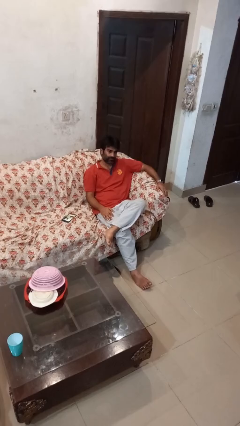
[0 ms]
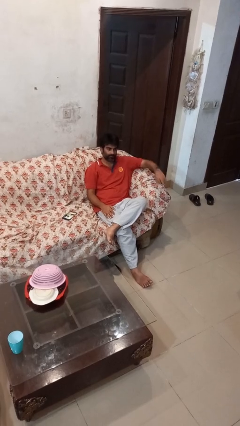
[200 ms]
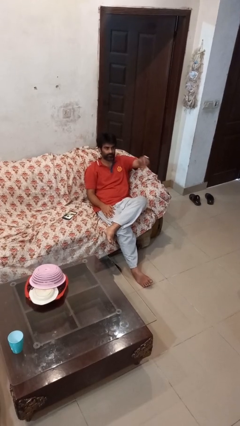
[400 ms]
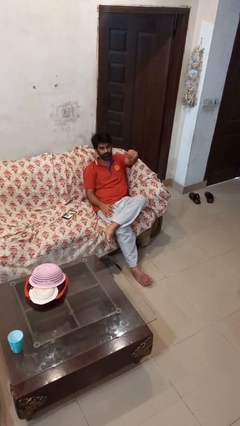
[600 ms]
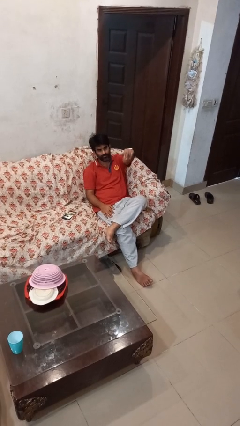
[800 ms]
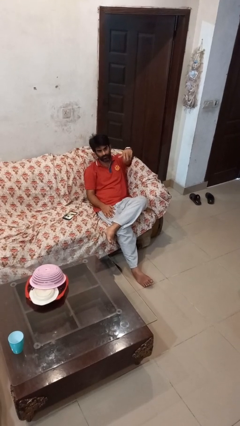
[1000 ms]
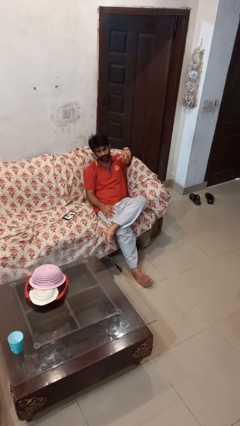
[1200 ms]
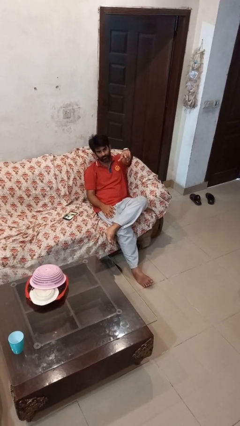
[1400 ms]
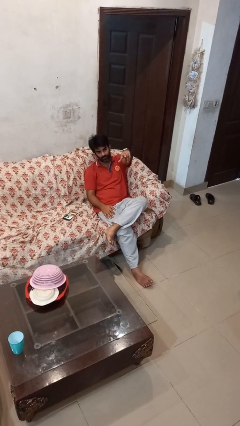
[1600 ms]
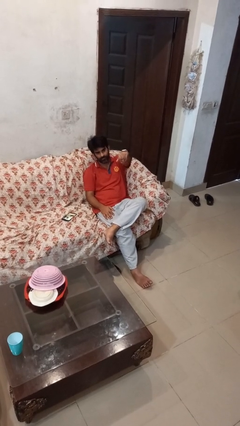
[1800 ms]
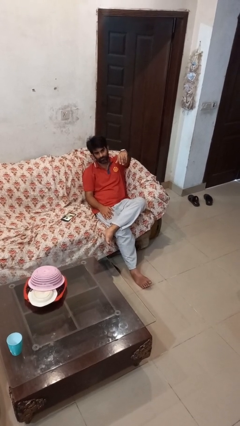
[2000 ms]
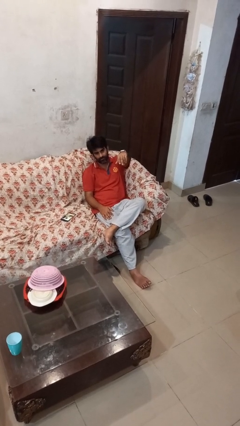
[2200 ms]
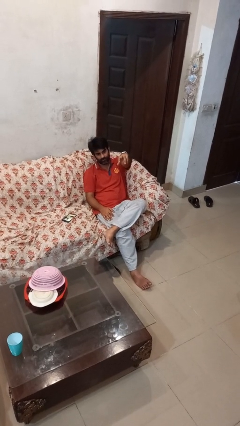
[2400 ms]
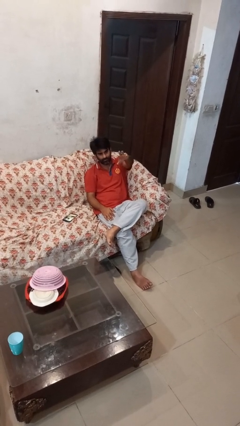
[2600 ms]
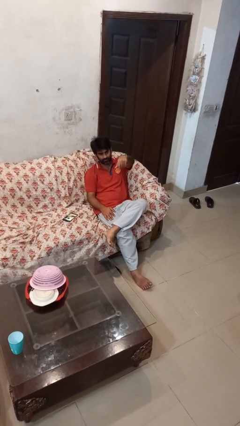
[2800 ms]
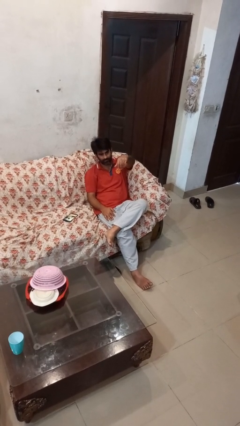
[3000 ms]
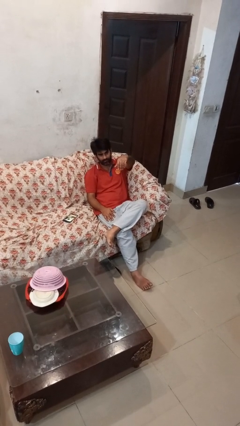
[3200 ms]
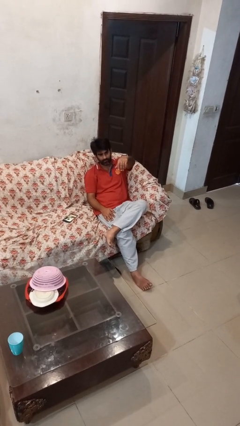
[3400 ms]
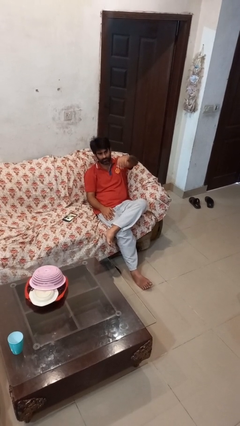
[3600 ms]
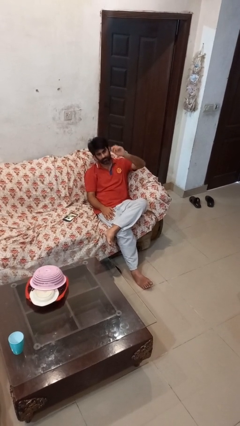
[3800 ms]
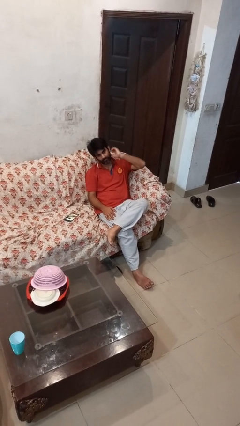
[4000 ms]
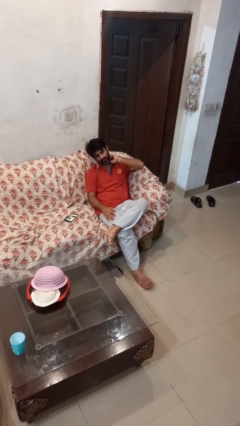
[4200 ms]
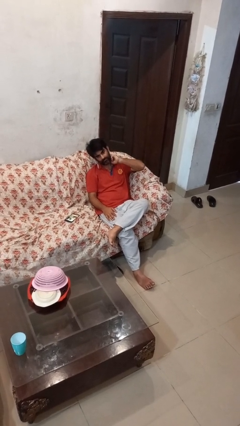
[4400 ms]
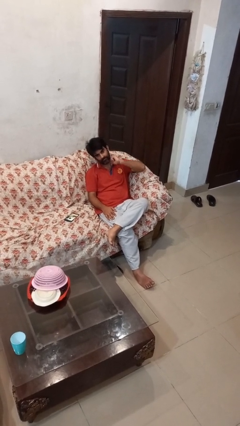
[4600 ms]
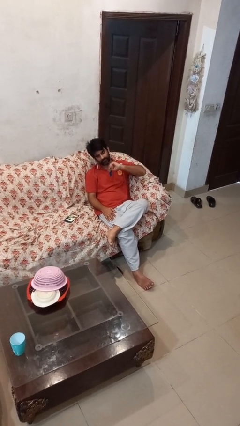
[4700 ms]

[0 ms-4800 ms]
person gestures come here

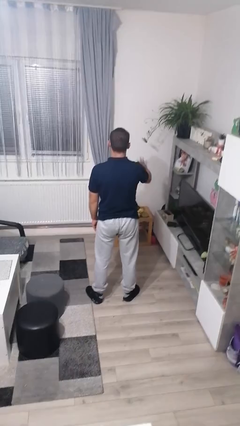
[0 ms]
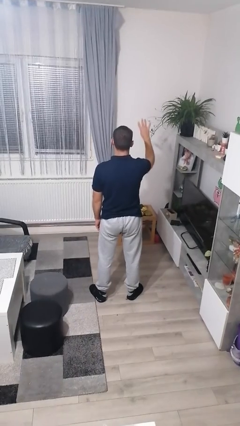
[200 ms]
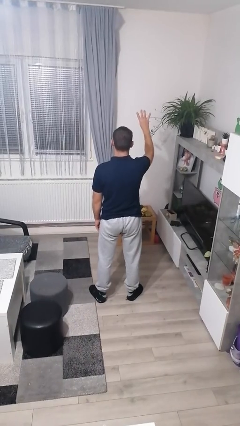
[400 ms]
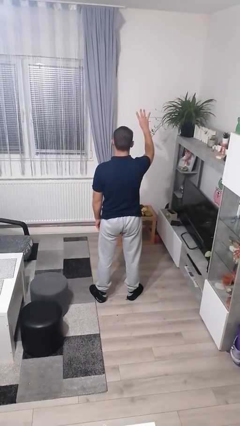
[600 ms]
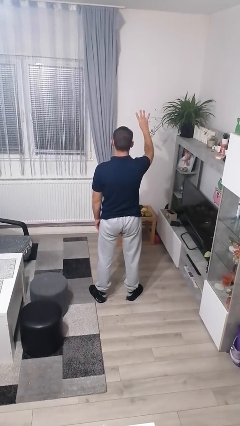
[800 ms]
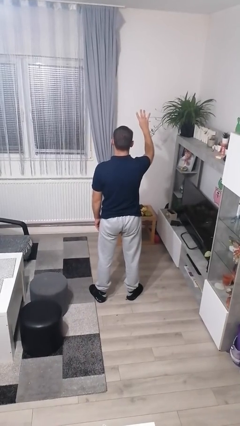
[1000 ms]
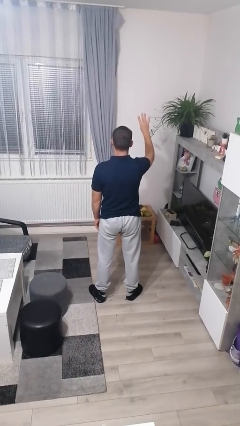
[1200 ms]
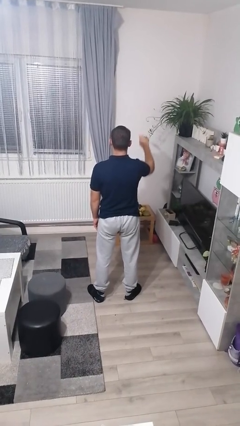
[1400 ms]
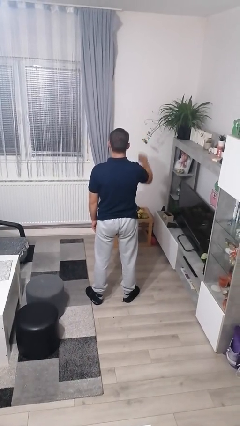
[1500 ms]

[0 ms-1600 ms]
person gestures number four

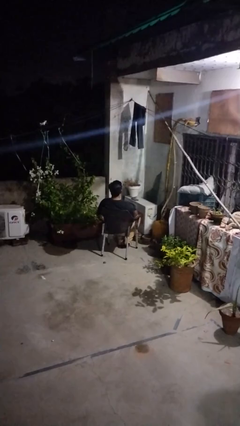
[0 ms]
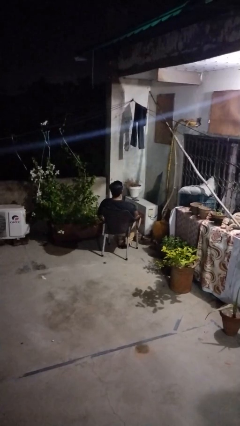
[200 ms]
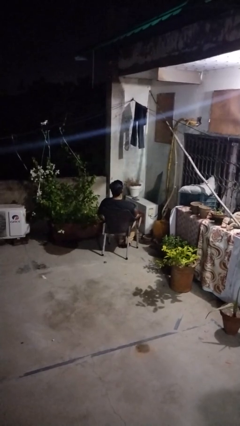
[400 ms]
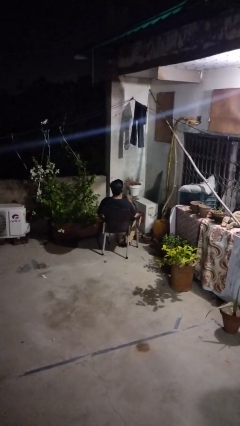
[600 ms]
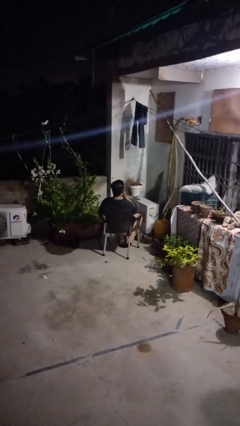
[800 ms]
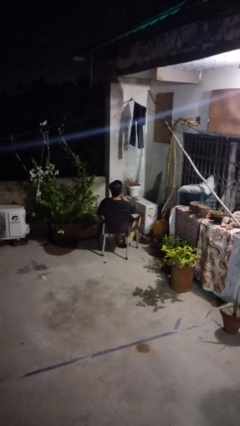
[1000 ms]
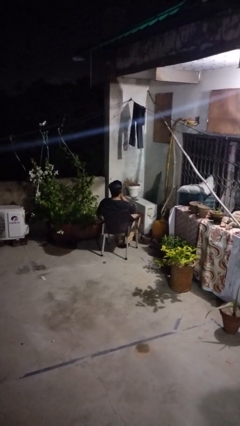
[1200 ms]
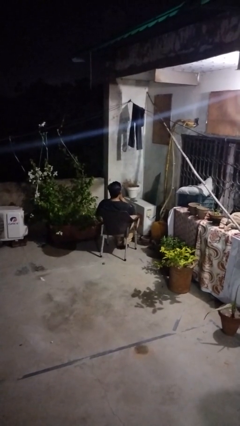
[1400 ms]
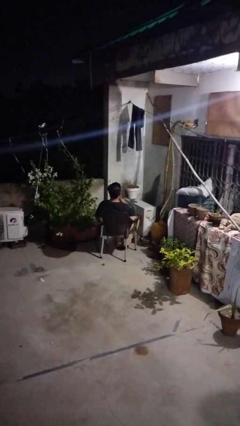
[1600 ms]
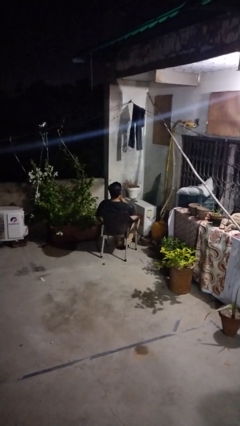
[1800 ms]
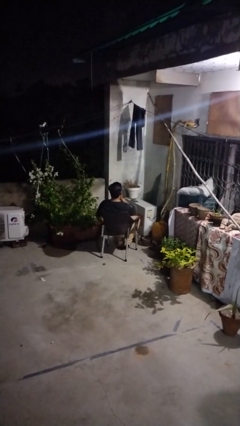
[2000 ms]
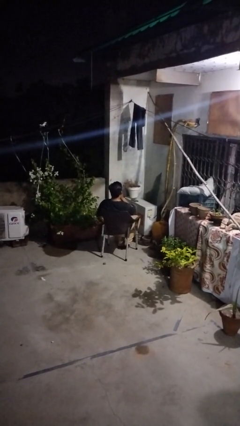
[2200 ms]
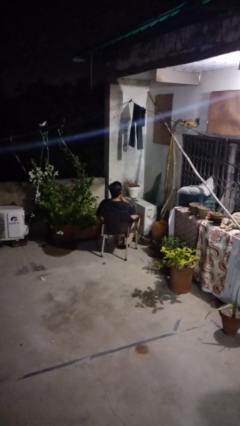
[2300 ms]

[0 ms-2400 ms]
person gestures be quiet

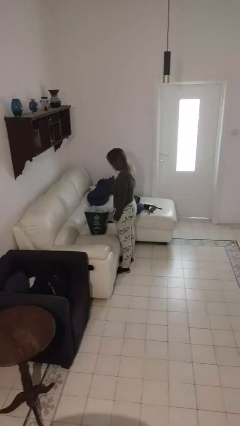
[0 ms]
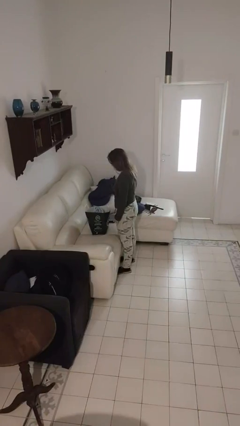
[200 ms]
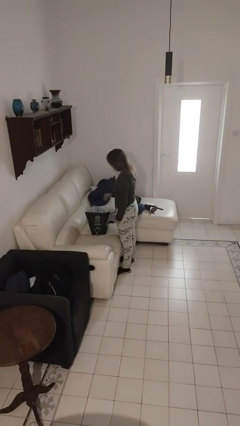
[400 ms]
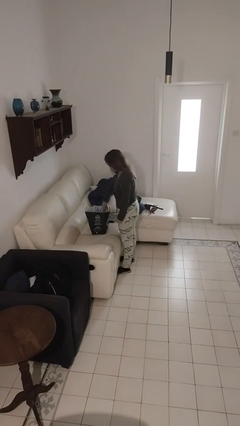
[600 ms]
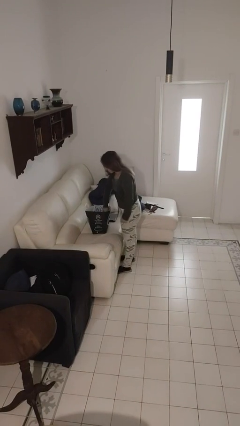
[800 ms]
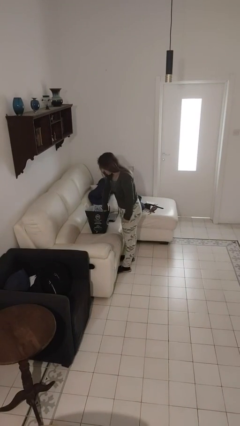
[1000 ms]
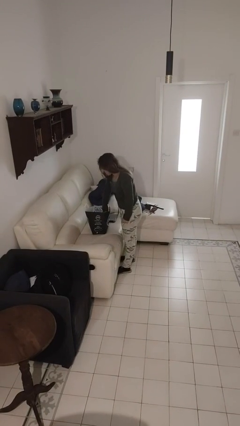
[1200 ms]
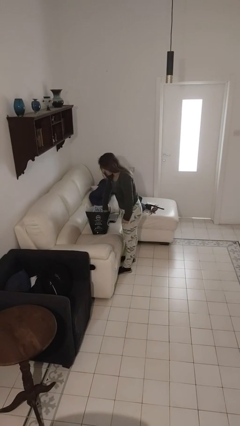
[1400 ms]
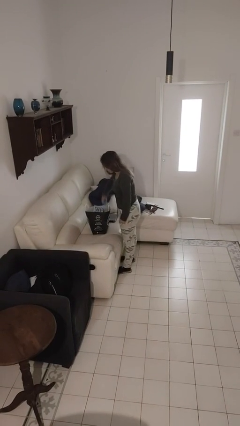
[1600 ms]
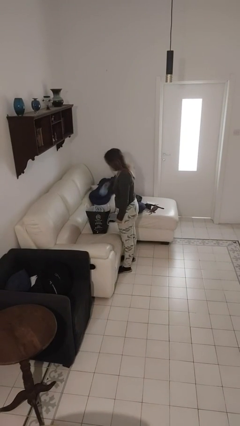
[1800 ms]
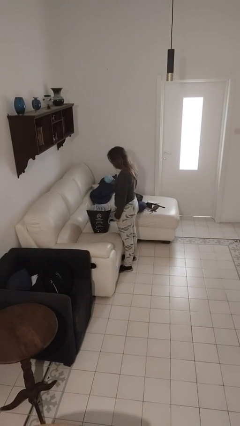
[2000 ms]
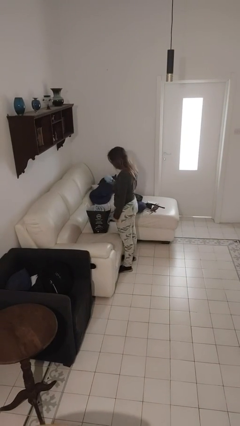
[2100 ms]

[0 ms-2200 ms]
person takes object from bag

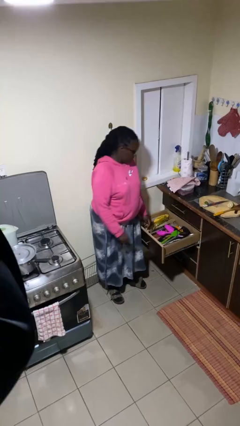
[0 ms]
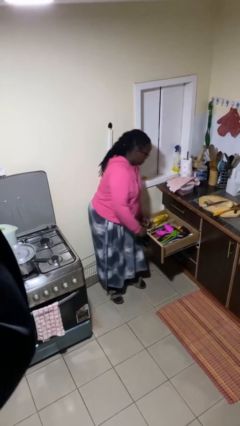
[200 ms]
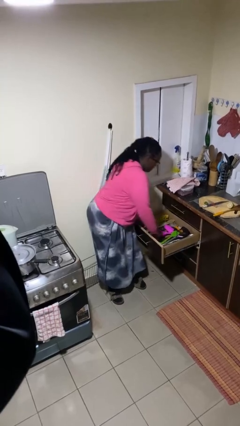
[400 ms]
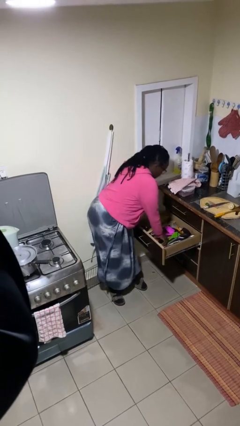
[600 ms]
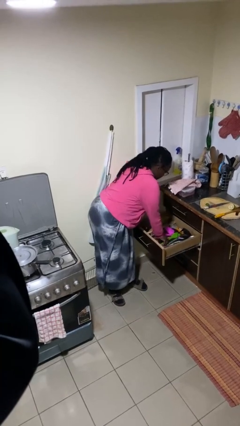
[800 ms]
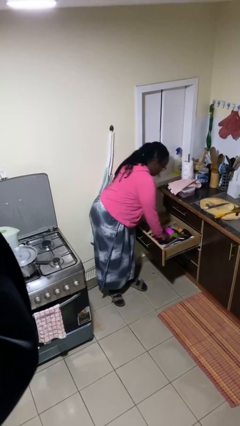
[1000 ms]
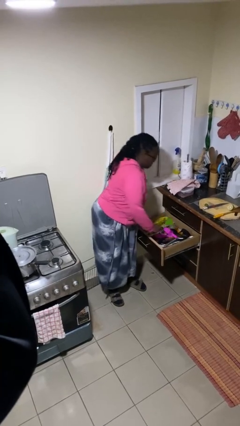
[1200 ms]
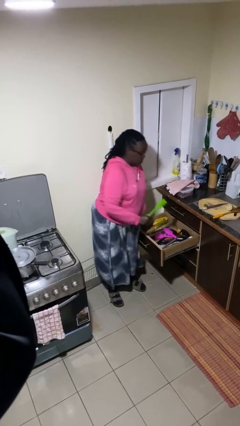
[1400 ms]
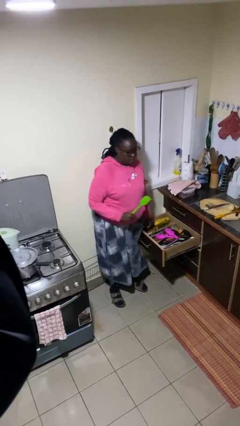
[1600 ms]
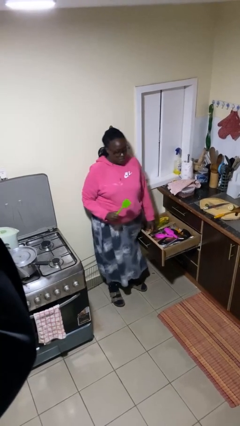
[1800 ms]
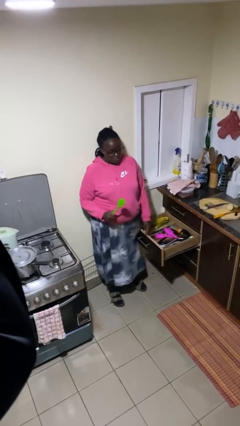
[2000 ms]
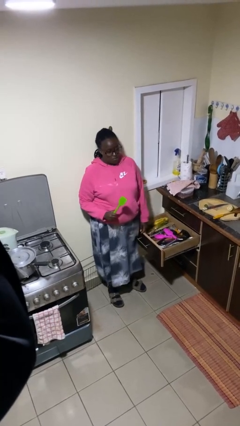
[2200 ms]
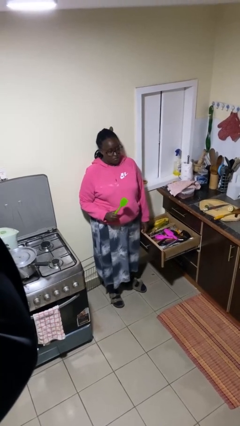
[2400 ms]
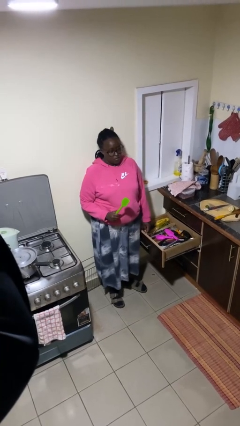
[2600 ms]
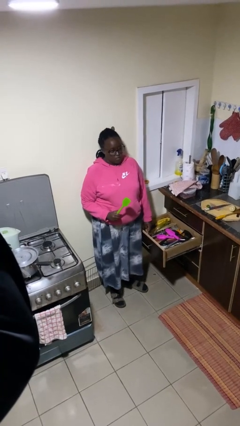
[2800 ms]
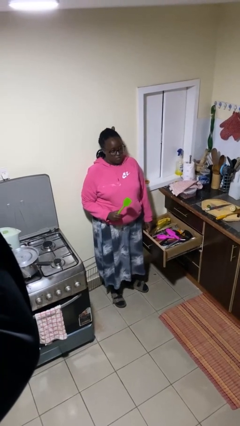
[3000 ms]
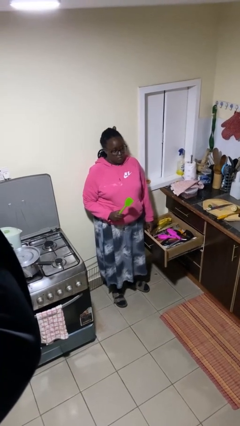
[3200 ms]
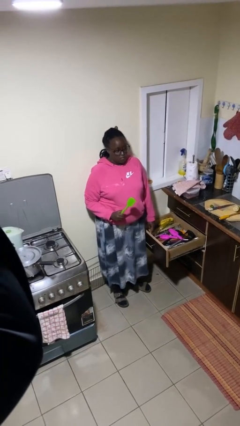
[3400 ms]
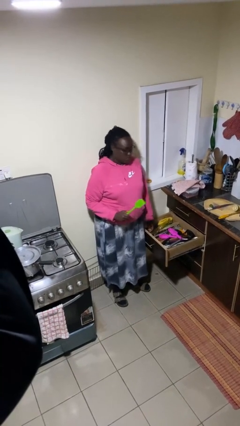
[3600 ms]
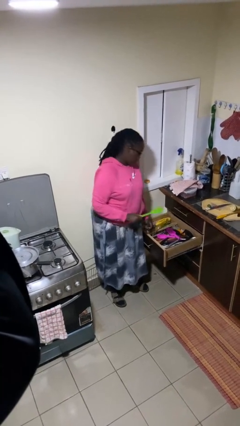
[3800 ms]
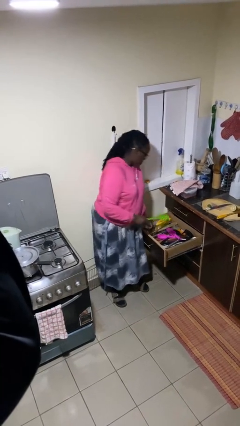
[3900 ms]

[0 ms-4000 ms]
person takes object from kitchen drawer

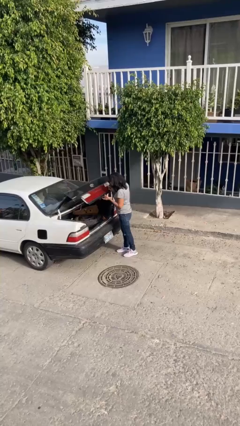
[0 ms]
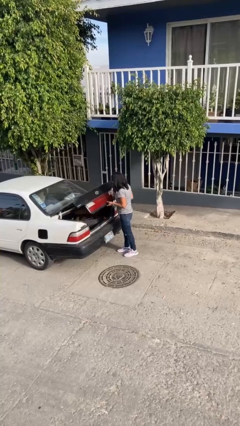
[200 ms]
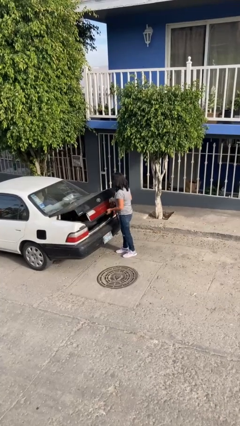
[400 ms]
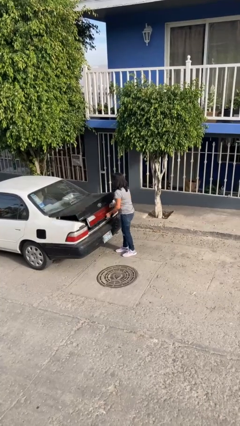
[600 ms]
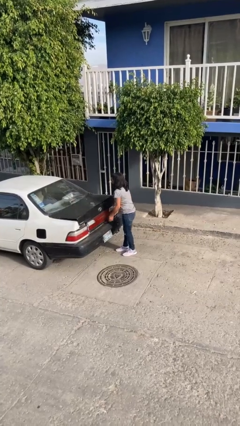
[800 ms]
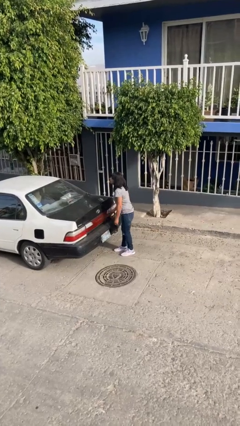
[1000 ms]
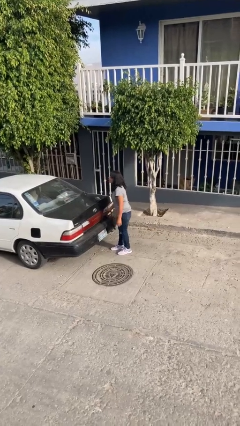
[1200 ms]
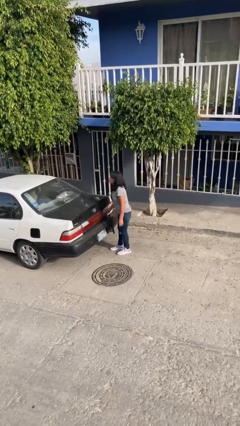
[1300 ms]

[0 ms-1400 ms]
person closes car trunk

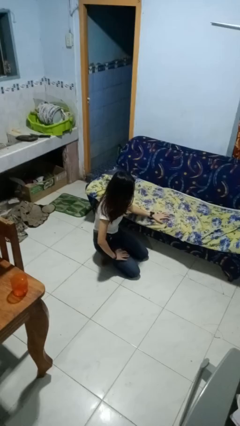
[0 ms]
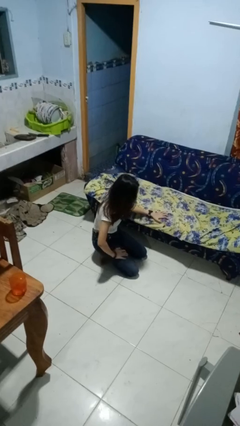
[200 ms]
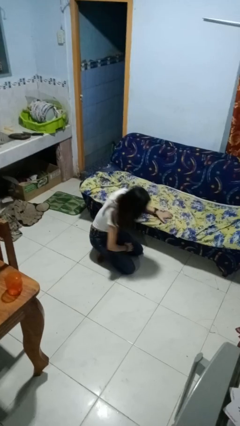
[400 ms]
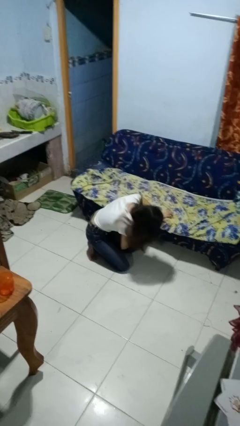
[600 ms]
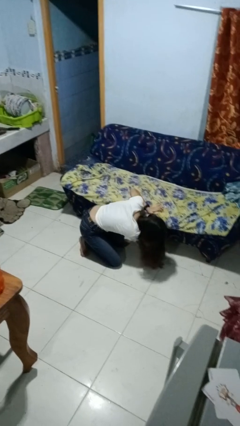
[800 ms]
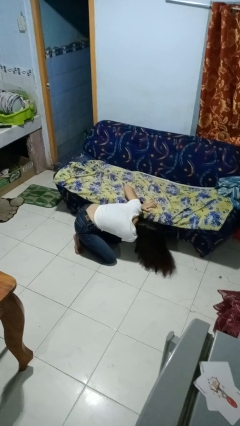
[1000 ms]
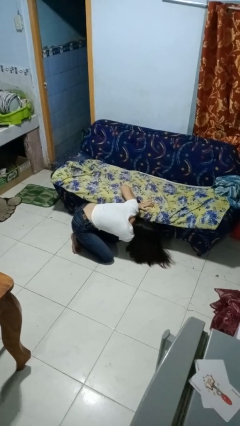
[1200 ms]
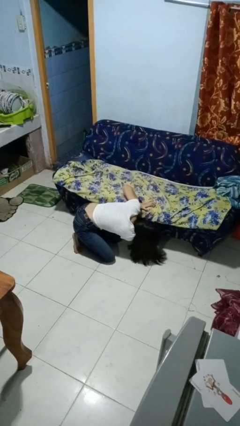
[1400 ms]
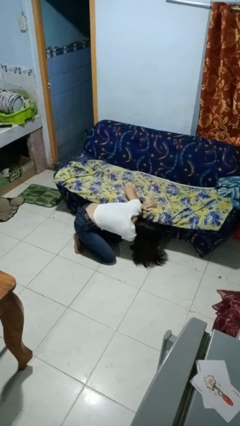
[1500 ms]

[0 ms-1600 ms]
person searches in couch
